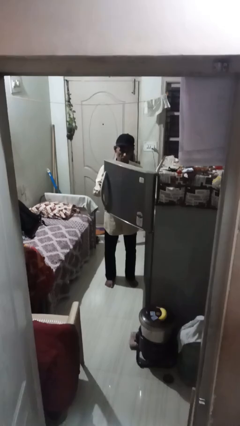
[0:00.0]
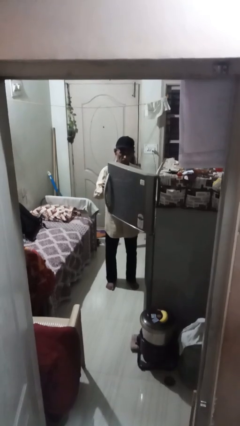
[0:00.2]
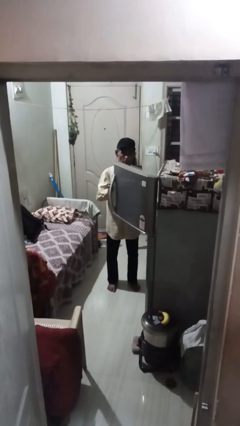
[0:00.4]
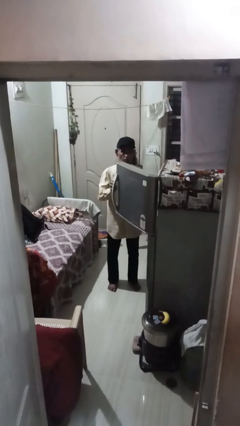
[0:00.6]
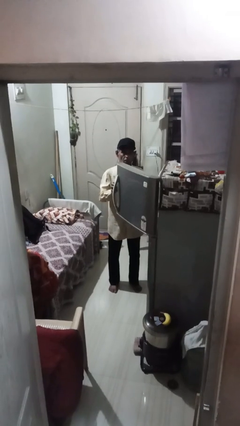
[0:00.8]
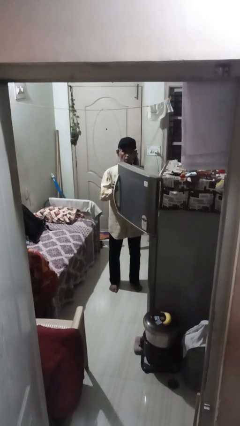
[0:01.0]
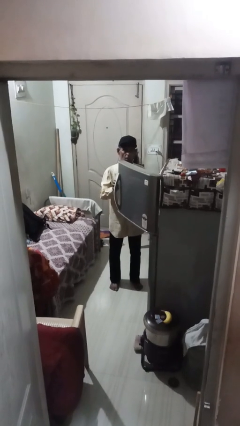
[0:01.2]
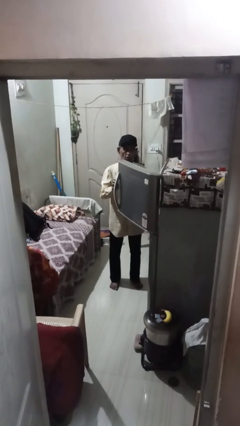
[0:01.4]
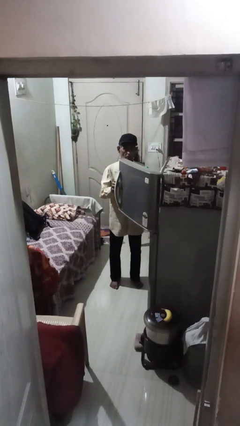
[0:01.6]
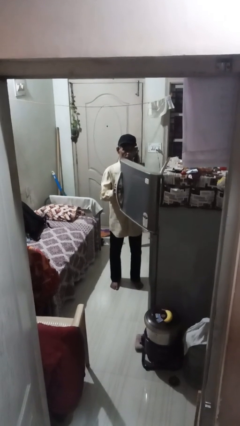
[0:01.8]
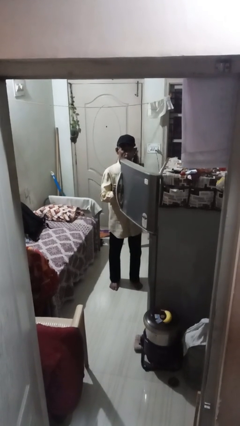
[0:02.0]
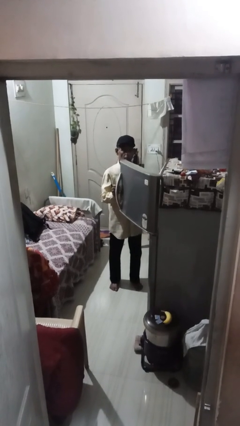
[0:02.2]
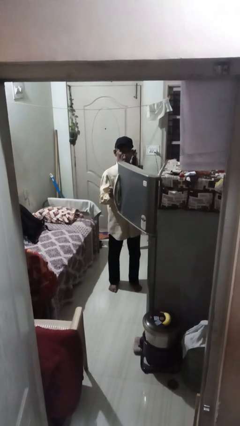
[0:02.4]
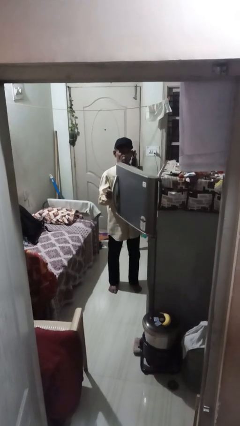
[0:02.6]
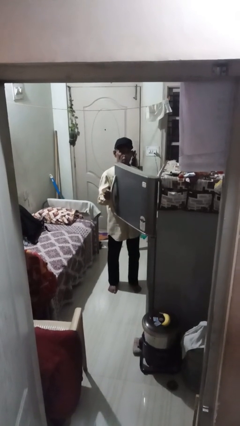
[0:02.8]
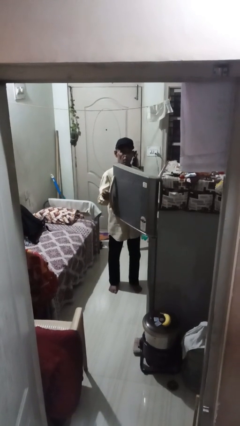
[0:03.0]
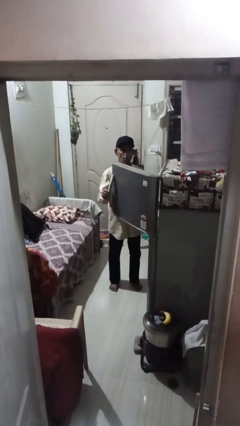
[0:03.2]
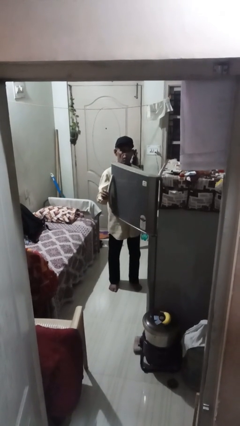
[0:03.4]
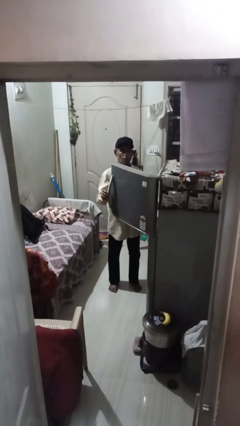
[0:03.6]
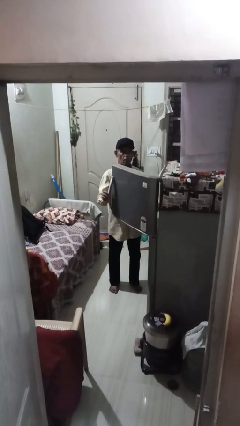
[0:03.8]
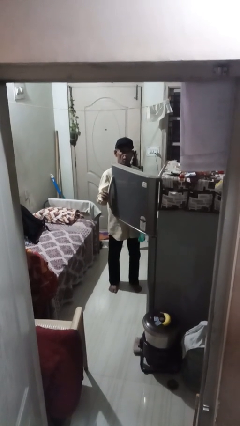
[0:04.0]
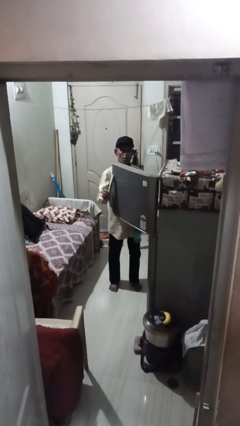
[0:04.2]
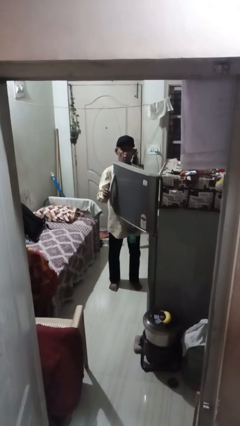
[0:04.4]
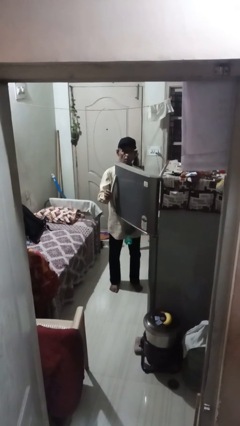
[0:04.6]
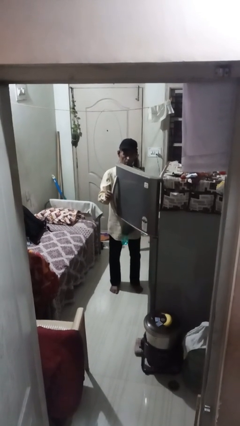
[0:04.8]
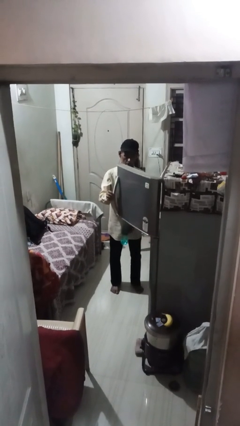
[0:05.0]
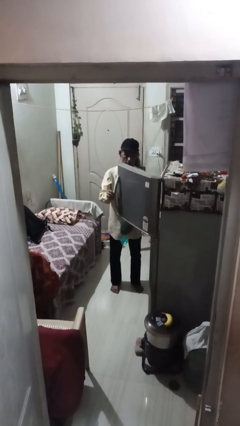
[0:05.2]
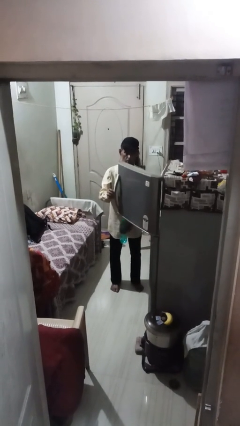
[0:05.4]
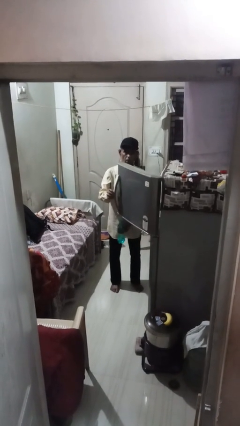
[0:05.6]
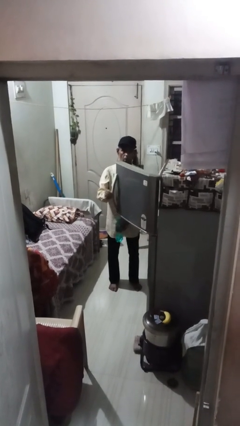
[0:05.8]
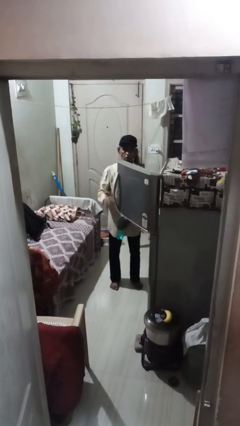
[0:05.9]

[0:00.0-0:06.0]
person takes object from refrigerator

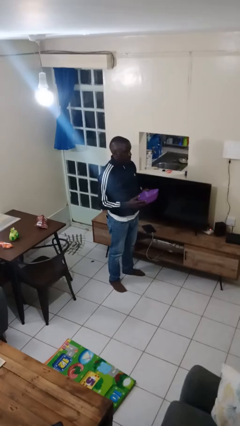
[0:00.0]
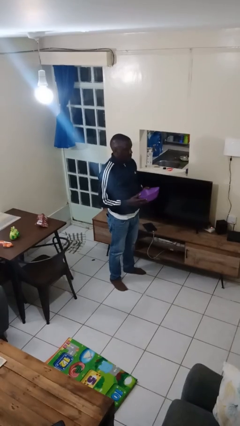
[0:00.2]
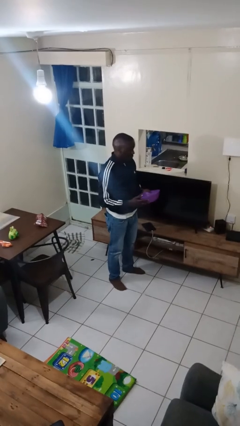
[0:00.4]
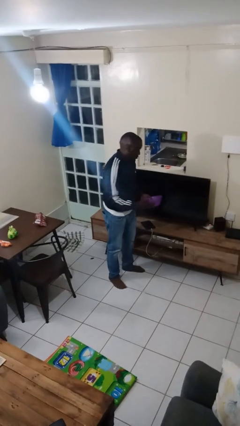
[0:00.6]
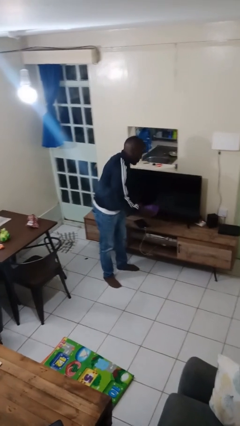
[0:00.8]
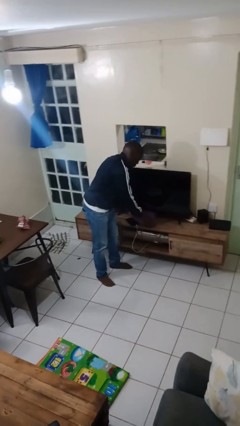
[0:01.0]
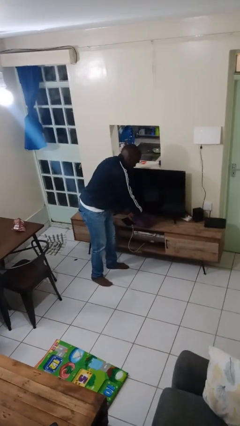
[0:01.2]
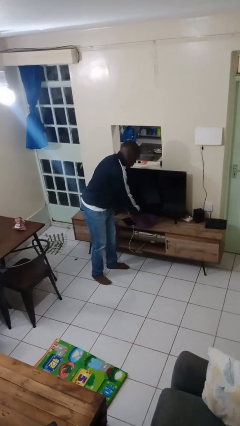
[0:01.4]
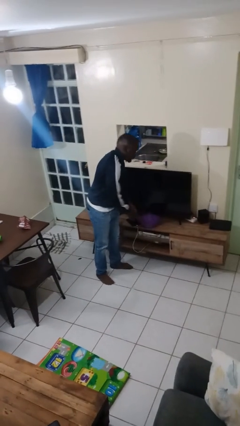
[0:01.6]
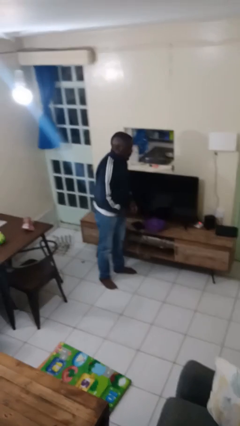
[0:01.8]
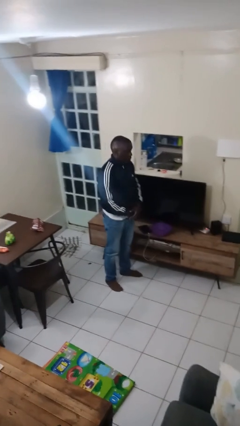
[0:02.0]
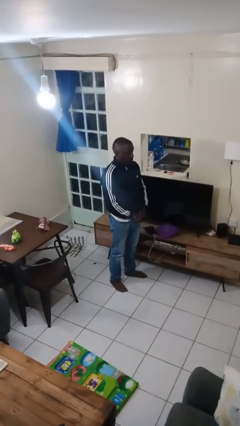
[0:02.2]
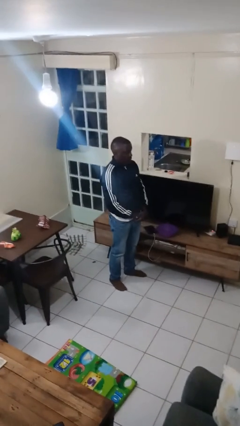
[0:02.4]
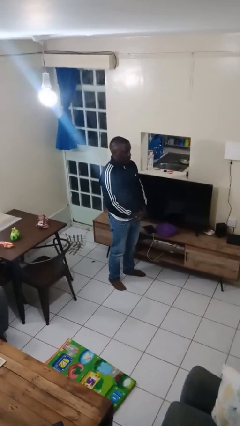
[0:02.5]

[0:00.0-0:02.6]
person puts down object on countertop

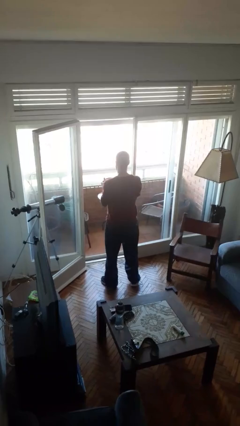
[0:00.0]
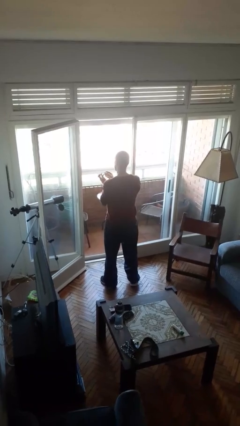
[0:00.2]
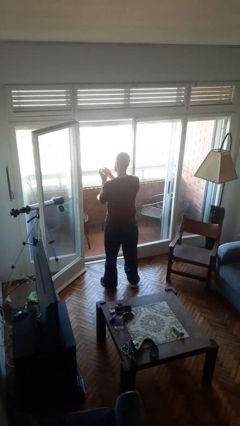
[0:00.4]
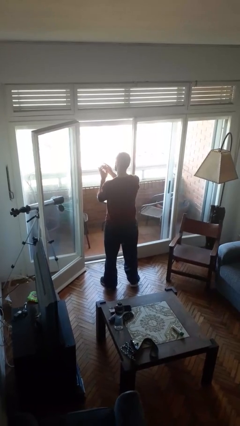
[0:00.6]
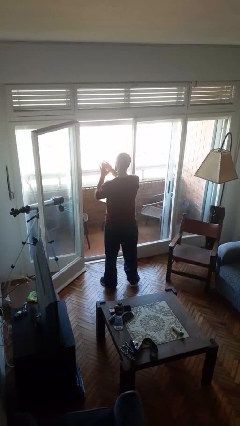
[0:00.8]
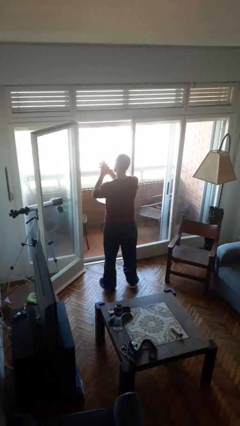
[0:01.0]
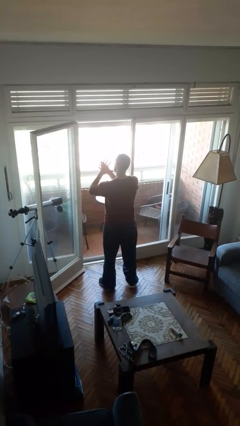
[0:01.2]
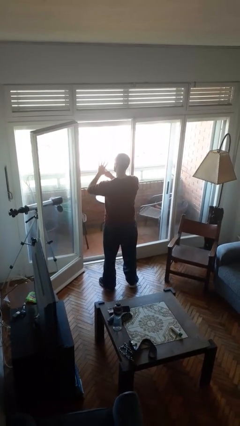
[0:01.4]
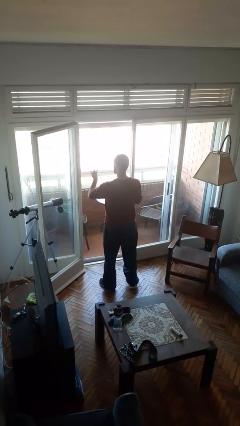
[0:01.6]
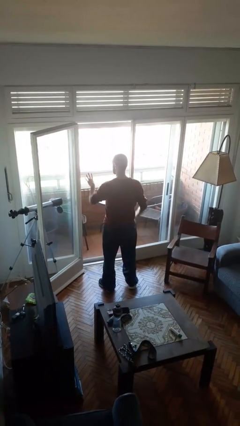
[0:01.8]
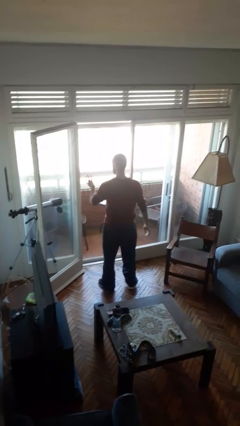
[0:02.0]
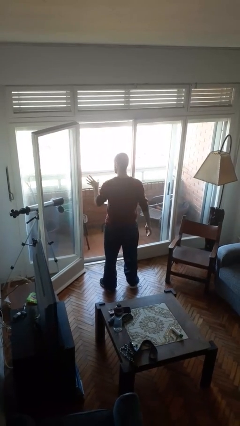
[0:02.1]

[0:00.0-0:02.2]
person puts on ring

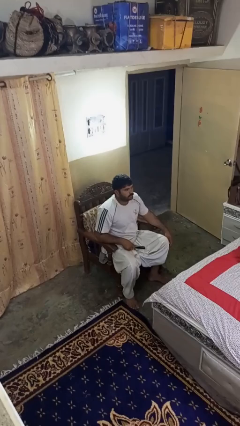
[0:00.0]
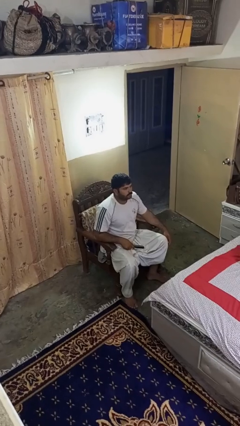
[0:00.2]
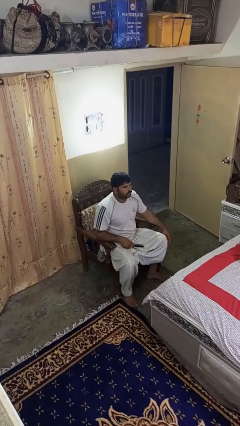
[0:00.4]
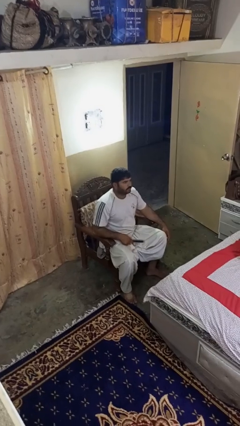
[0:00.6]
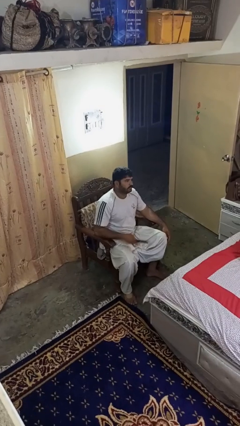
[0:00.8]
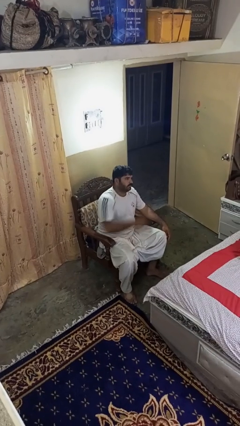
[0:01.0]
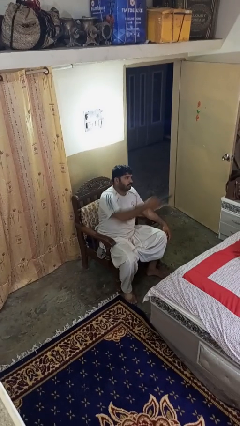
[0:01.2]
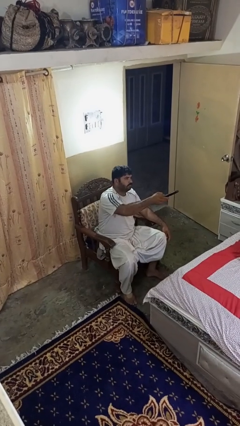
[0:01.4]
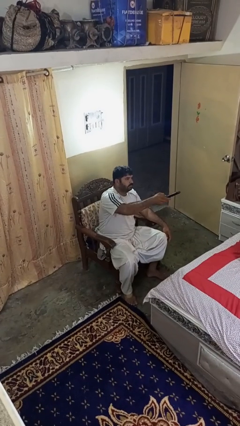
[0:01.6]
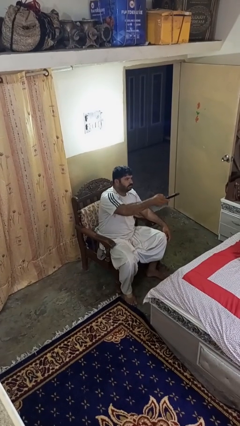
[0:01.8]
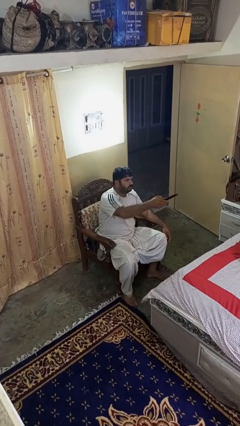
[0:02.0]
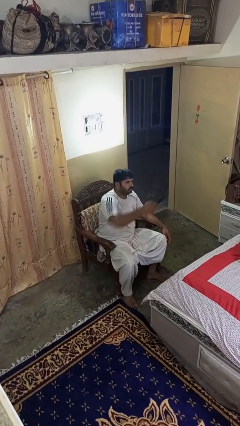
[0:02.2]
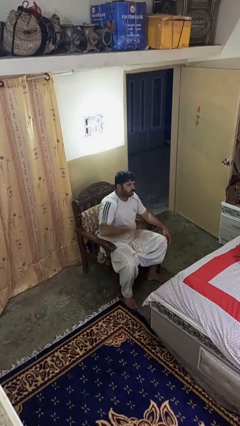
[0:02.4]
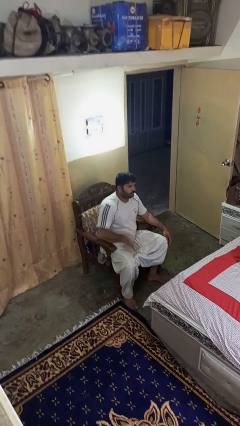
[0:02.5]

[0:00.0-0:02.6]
person uses television remote

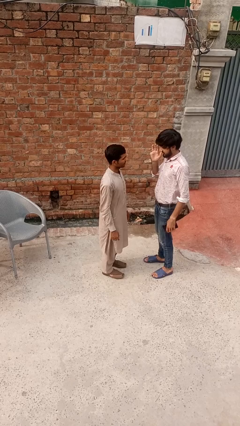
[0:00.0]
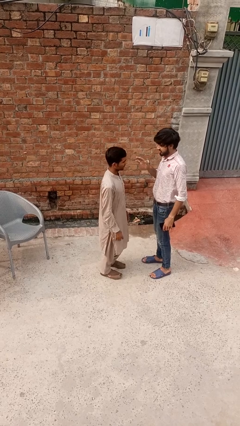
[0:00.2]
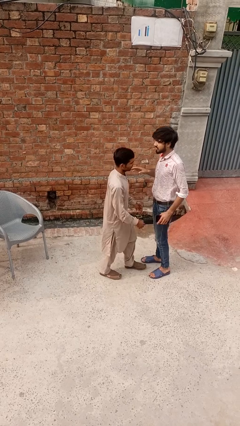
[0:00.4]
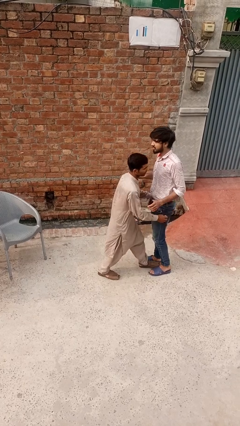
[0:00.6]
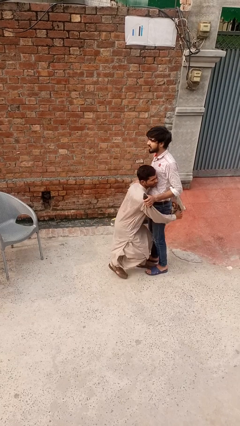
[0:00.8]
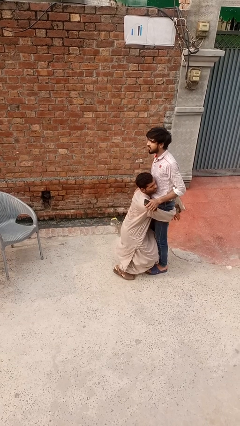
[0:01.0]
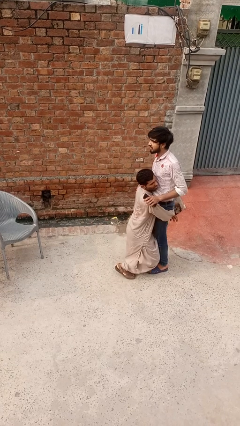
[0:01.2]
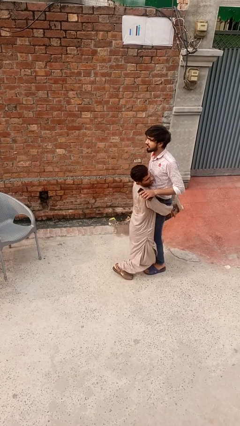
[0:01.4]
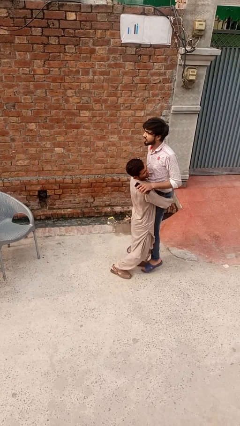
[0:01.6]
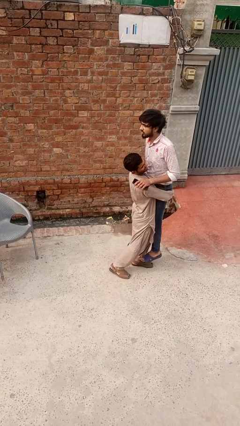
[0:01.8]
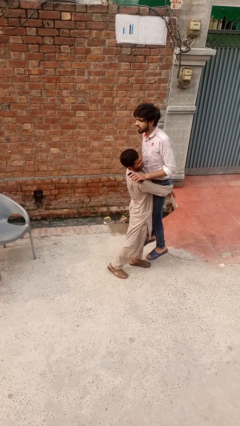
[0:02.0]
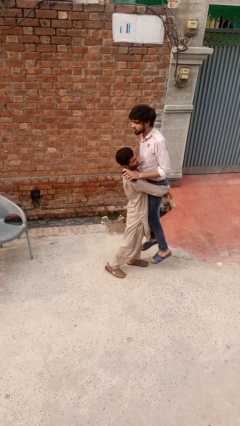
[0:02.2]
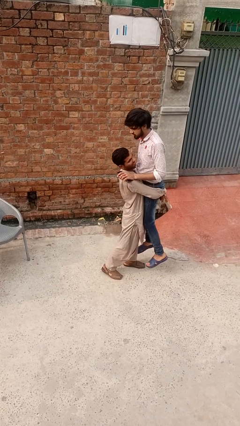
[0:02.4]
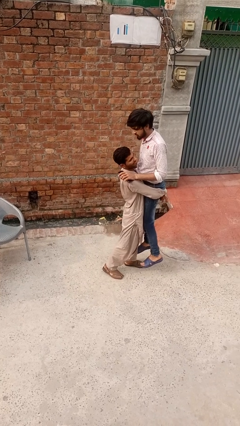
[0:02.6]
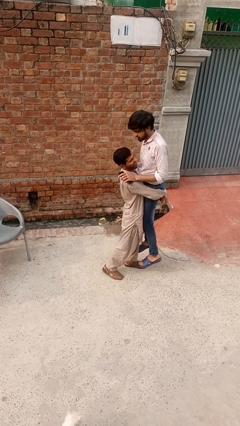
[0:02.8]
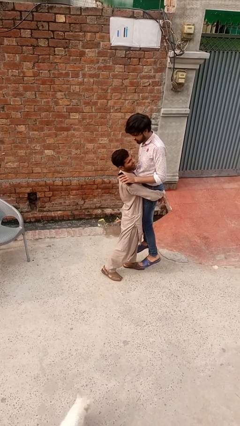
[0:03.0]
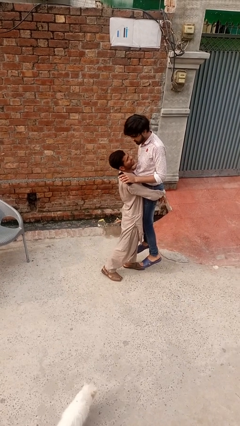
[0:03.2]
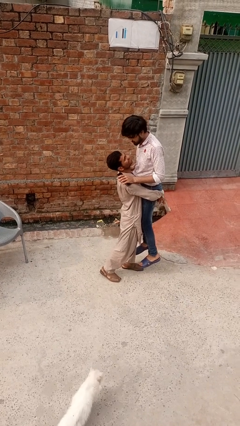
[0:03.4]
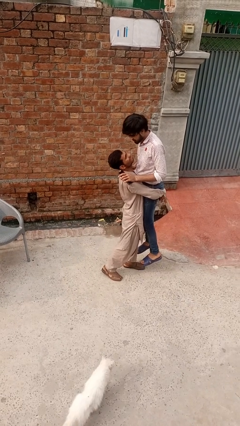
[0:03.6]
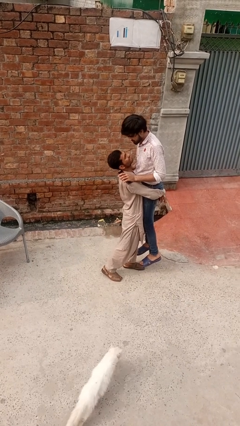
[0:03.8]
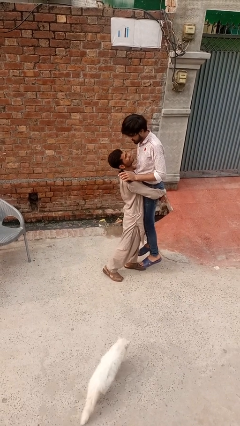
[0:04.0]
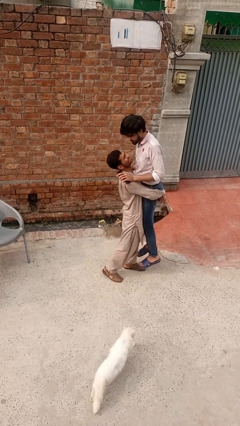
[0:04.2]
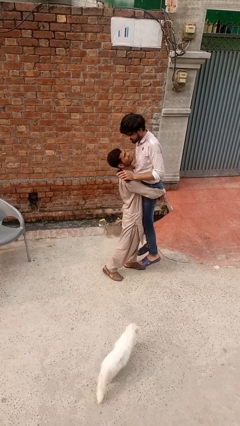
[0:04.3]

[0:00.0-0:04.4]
person picks up person

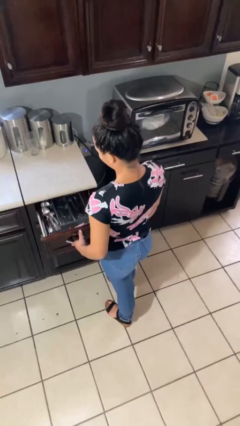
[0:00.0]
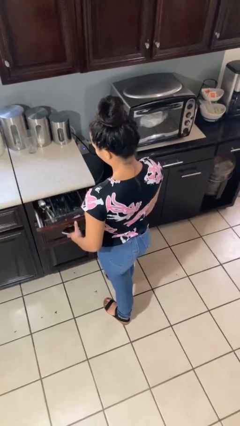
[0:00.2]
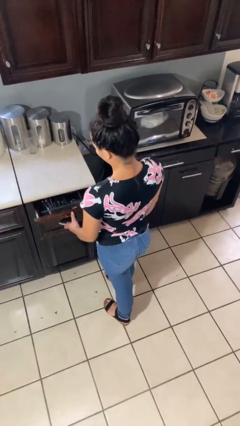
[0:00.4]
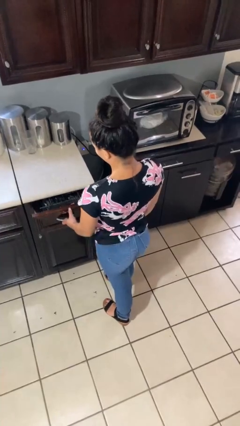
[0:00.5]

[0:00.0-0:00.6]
person closes kitchen drawer
